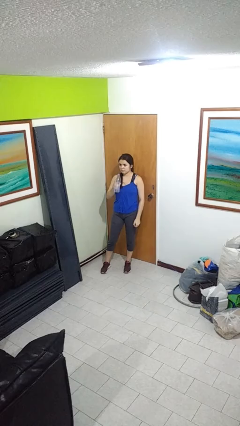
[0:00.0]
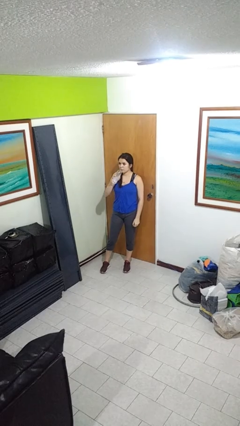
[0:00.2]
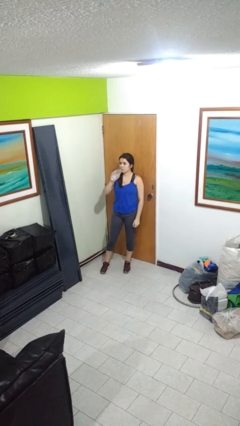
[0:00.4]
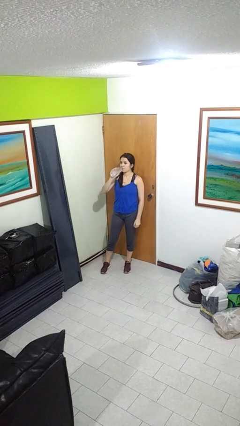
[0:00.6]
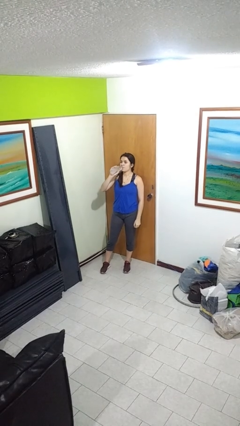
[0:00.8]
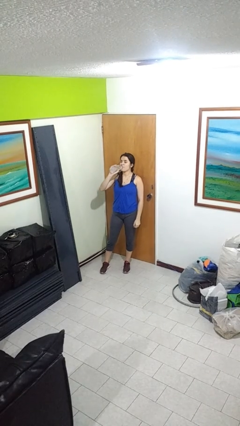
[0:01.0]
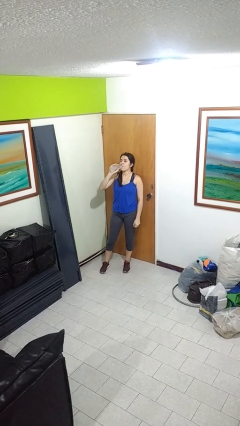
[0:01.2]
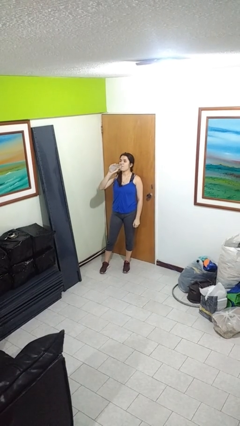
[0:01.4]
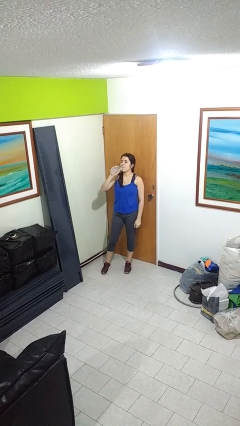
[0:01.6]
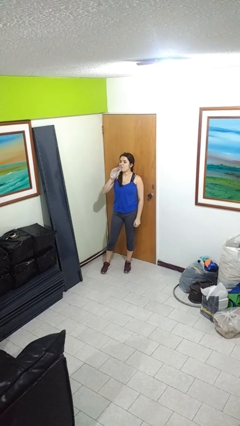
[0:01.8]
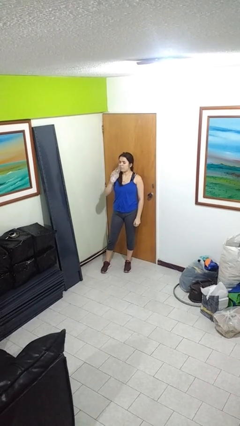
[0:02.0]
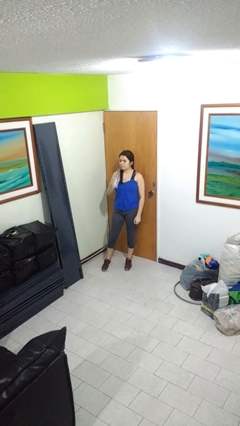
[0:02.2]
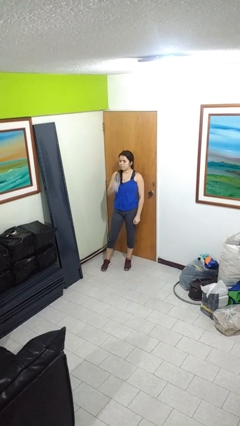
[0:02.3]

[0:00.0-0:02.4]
person drinks from bottle

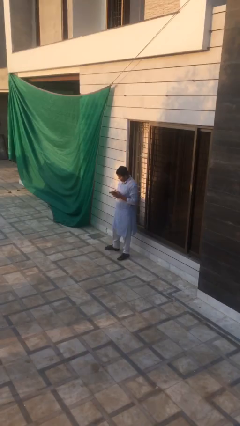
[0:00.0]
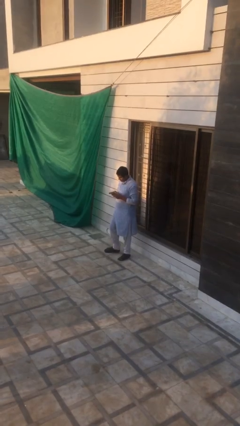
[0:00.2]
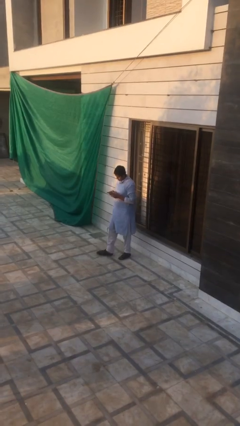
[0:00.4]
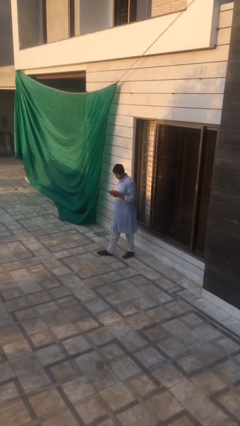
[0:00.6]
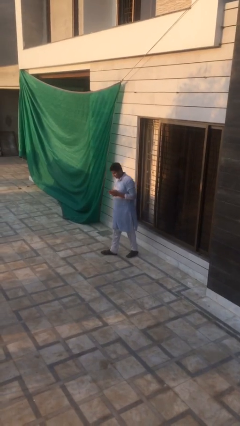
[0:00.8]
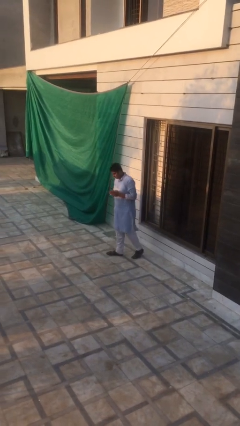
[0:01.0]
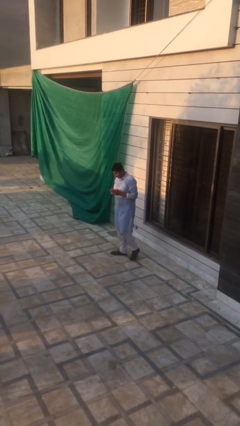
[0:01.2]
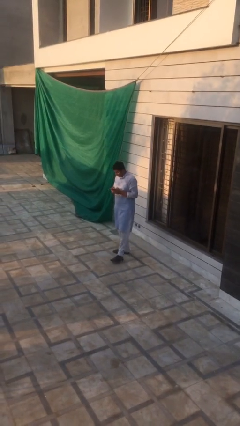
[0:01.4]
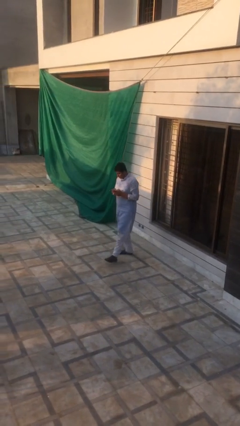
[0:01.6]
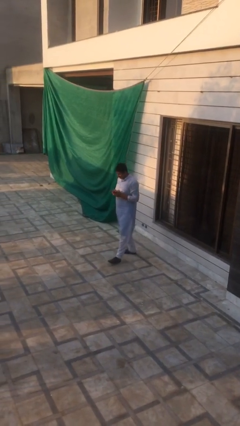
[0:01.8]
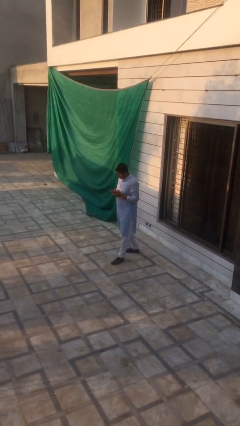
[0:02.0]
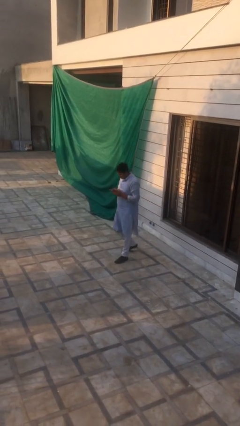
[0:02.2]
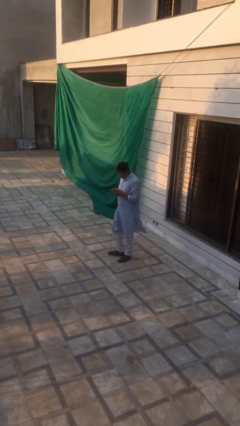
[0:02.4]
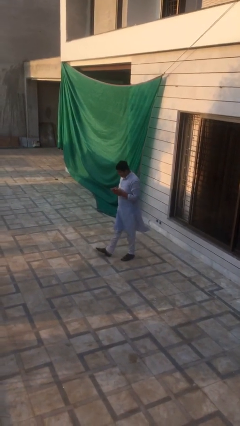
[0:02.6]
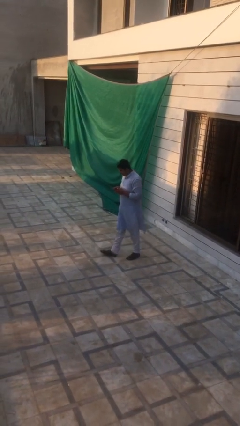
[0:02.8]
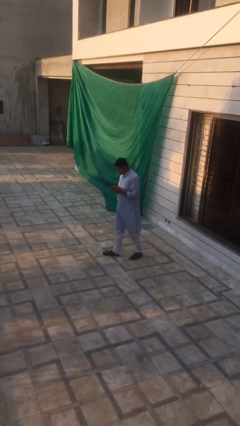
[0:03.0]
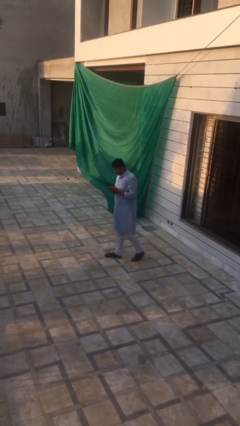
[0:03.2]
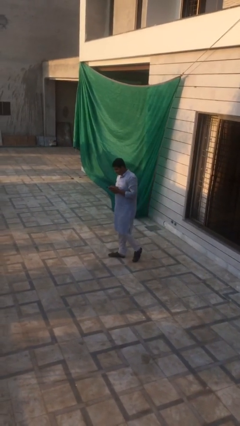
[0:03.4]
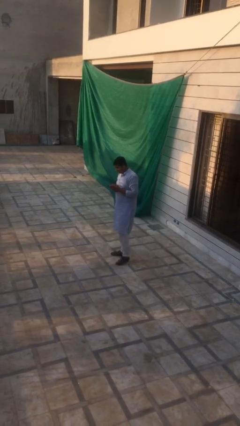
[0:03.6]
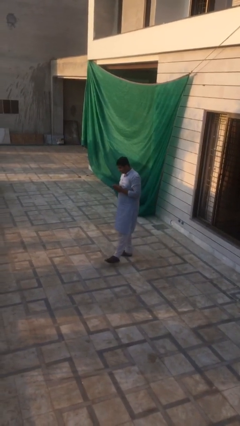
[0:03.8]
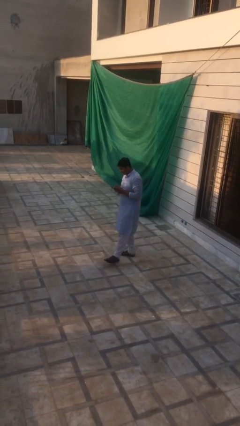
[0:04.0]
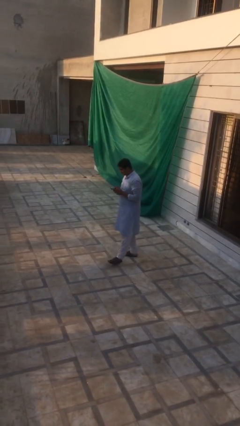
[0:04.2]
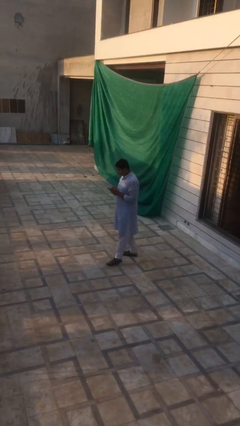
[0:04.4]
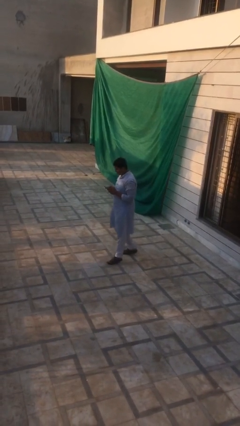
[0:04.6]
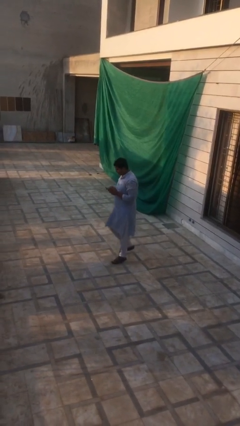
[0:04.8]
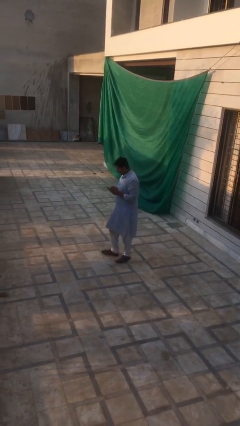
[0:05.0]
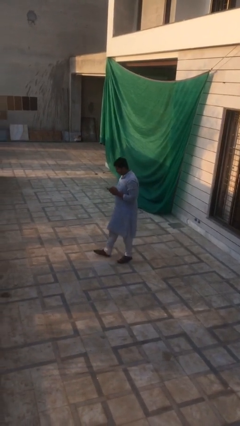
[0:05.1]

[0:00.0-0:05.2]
person texts on phone

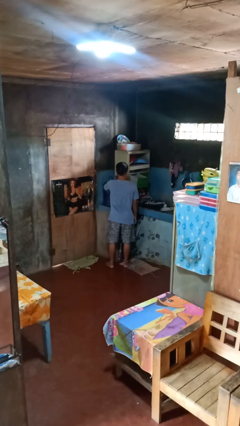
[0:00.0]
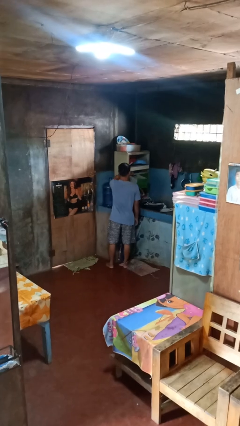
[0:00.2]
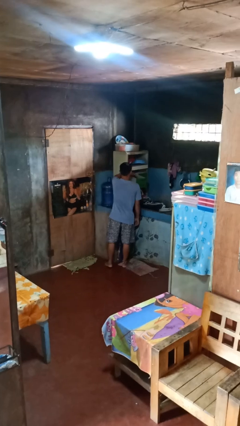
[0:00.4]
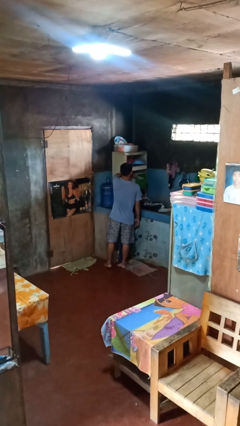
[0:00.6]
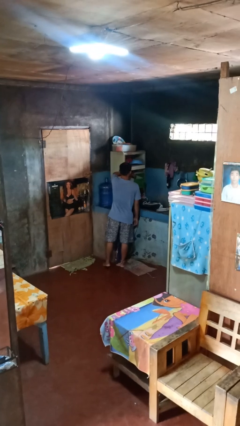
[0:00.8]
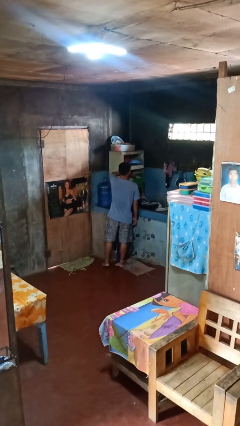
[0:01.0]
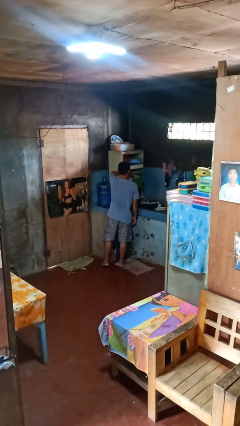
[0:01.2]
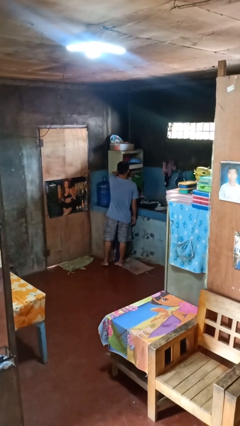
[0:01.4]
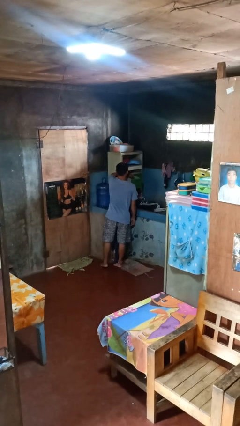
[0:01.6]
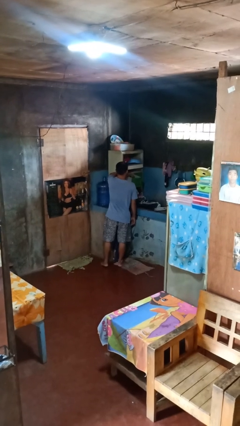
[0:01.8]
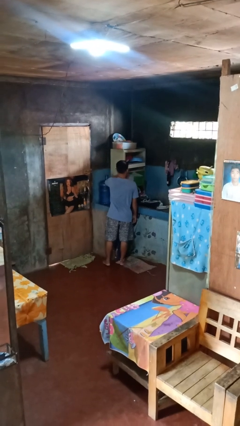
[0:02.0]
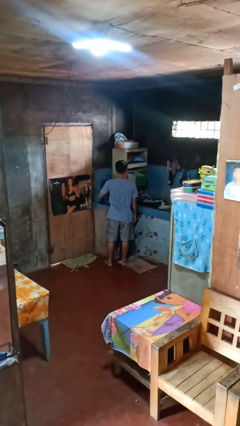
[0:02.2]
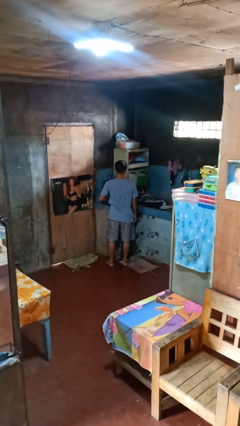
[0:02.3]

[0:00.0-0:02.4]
person searches in kitchen drawer

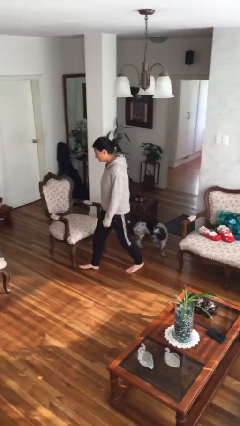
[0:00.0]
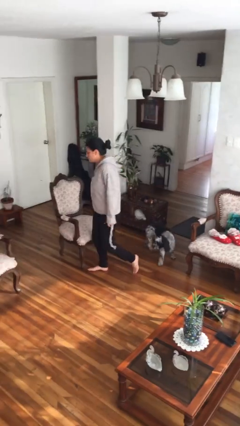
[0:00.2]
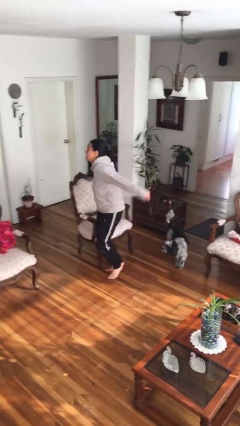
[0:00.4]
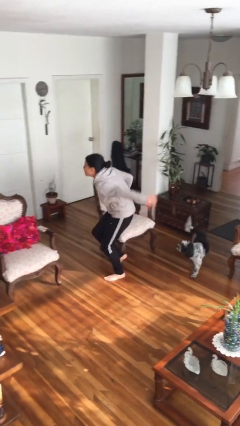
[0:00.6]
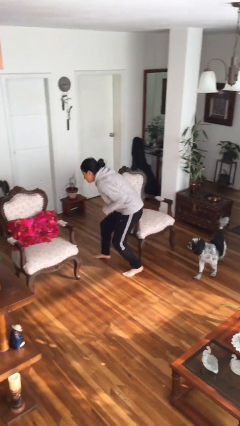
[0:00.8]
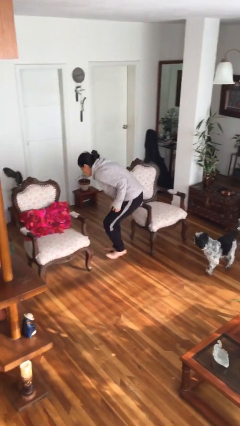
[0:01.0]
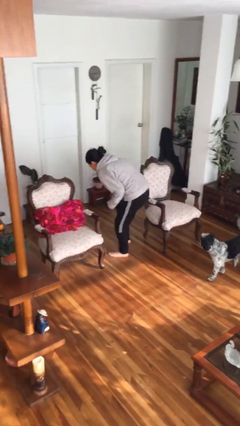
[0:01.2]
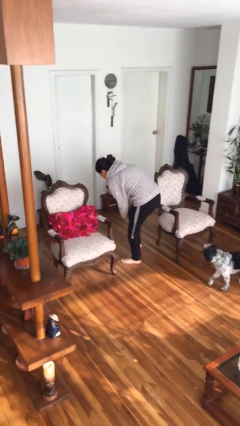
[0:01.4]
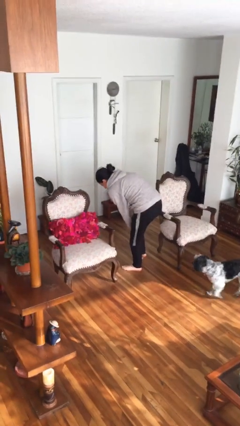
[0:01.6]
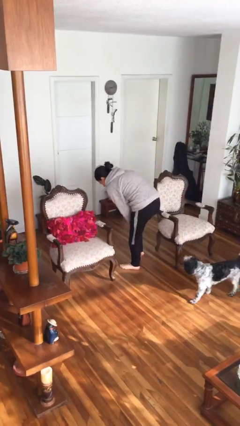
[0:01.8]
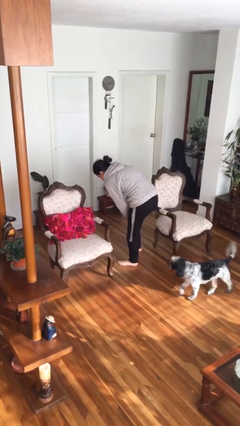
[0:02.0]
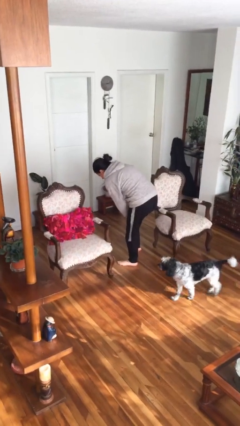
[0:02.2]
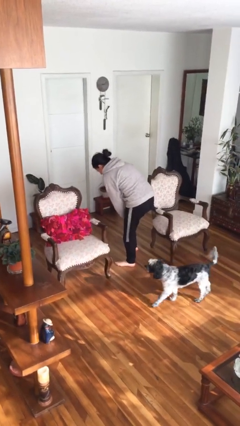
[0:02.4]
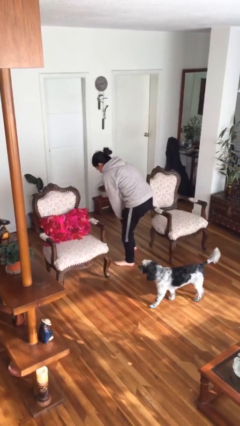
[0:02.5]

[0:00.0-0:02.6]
person stubs toe

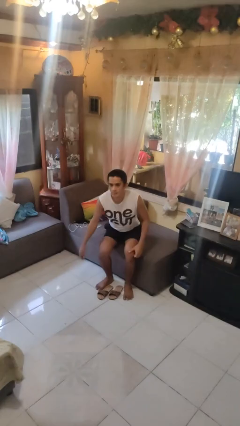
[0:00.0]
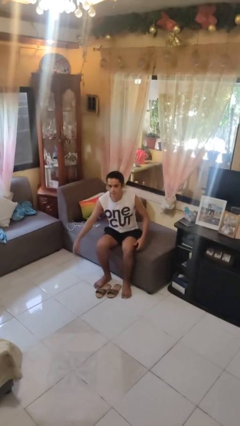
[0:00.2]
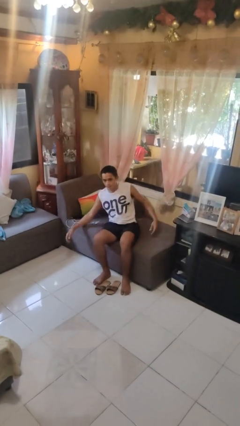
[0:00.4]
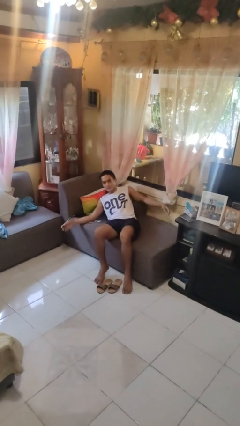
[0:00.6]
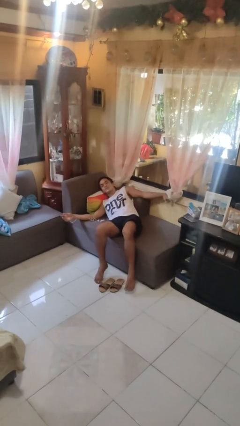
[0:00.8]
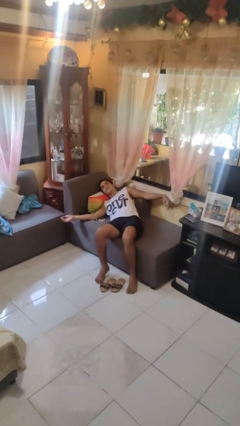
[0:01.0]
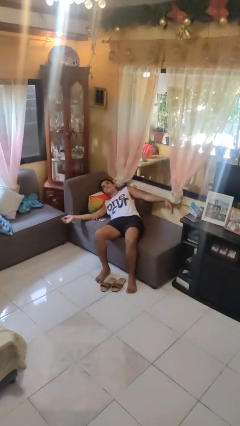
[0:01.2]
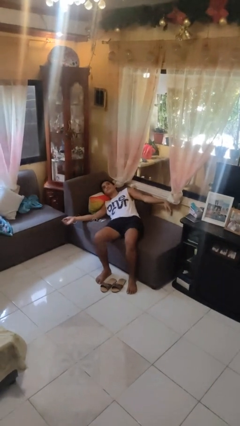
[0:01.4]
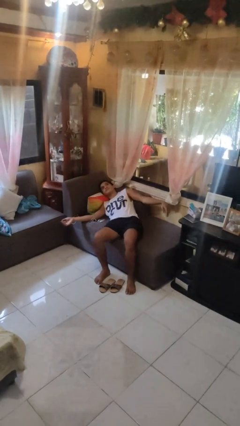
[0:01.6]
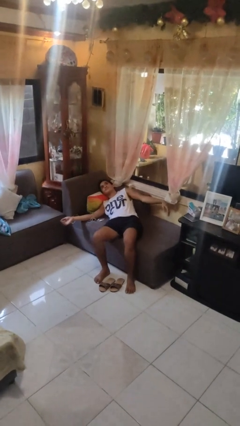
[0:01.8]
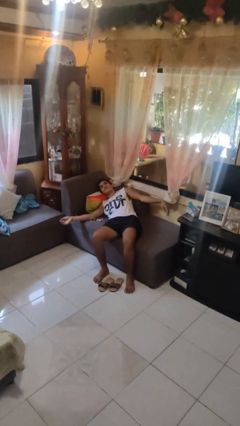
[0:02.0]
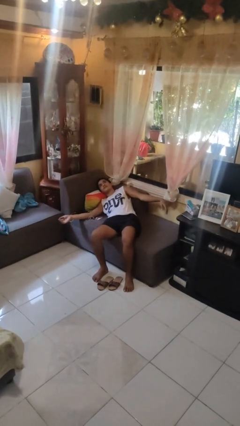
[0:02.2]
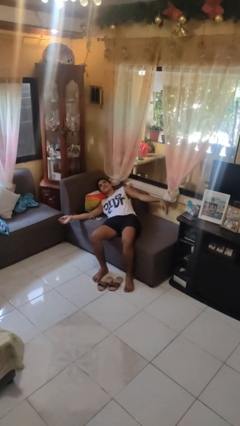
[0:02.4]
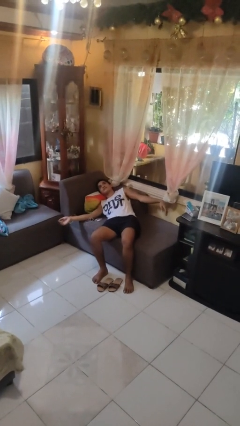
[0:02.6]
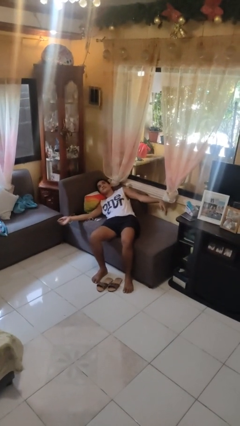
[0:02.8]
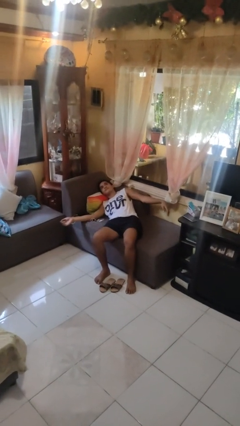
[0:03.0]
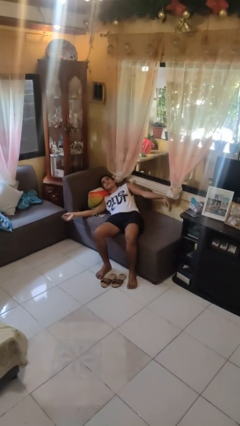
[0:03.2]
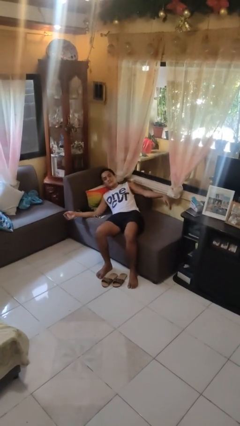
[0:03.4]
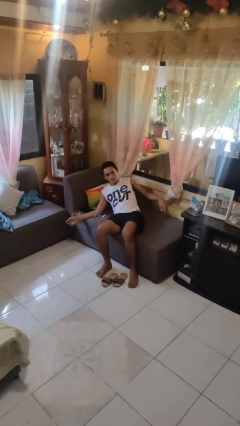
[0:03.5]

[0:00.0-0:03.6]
person lies down on couch

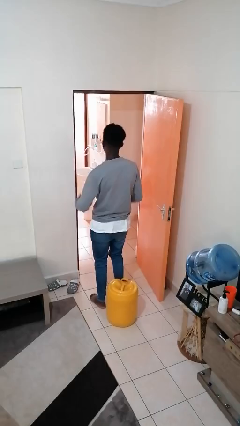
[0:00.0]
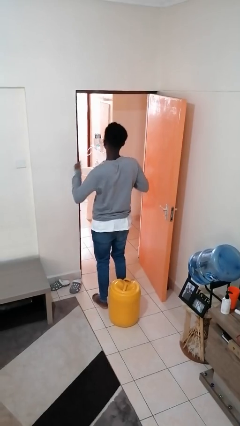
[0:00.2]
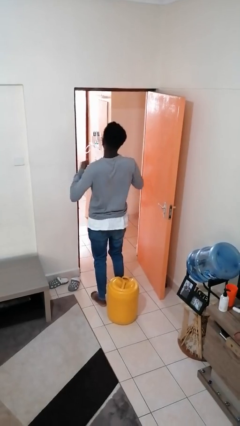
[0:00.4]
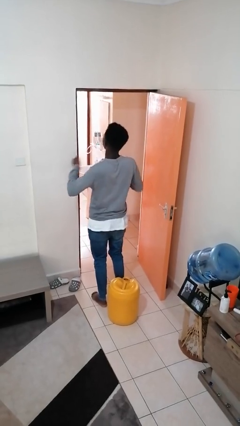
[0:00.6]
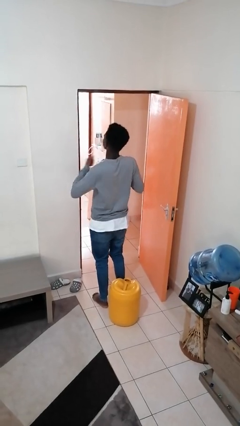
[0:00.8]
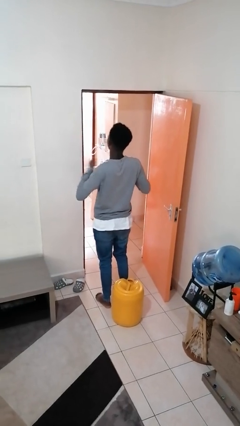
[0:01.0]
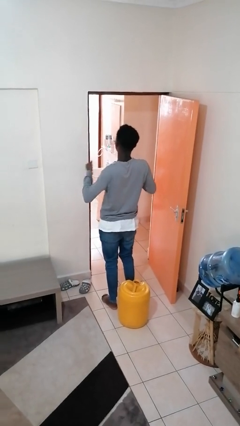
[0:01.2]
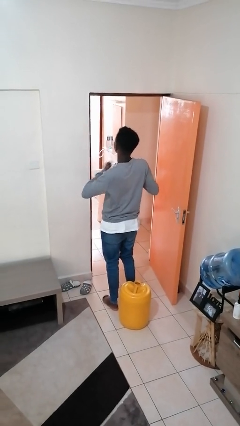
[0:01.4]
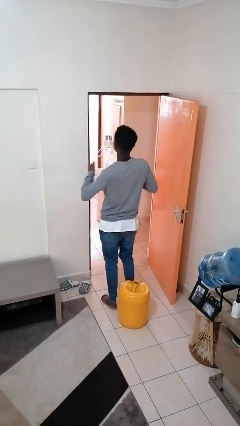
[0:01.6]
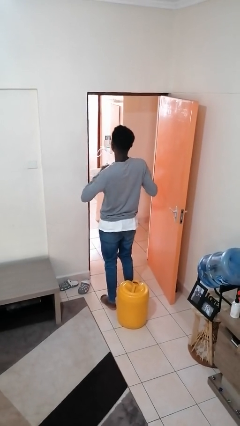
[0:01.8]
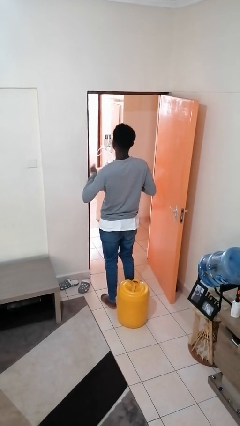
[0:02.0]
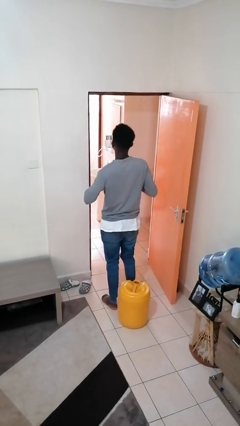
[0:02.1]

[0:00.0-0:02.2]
person drums on chest
